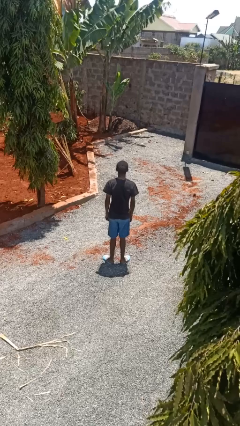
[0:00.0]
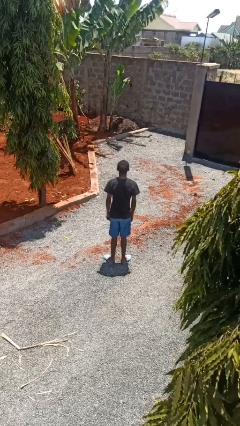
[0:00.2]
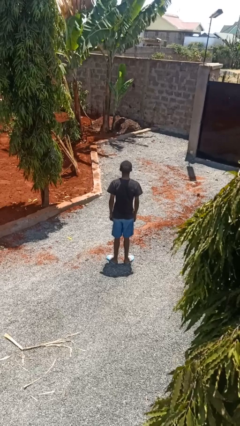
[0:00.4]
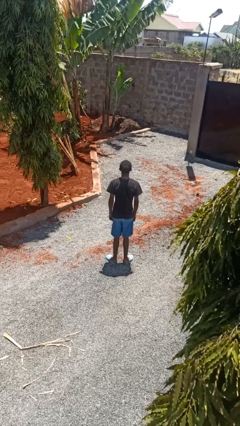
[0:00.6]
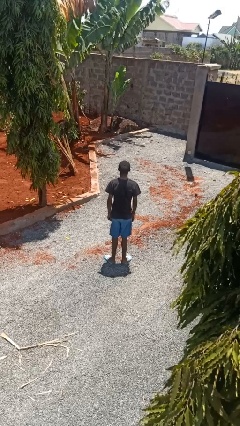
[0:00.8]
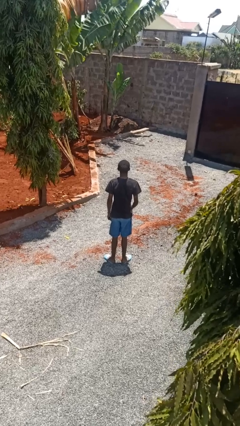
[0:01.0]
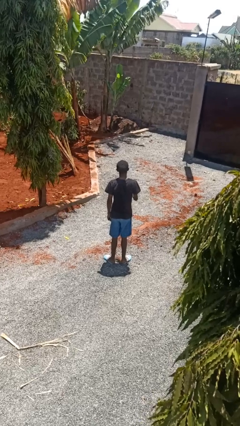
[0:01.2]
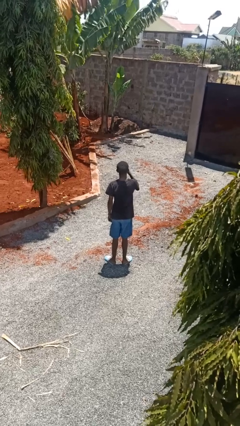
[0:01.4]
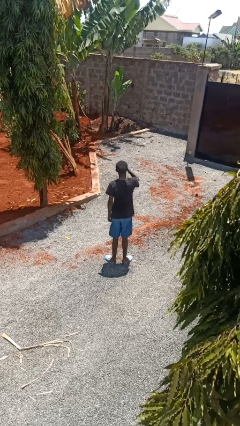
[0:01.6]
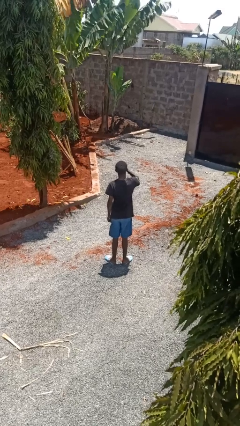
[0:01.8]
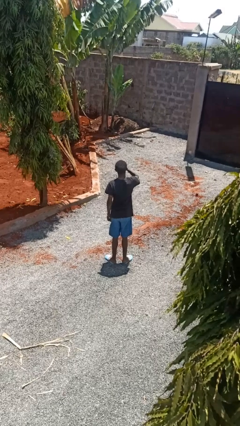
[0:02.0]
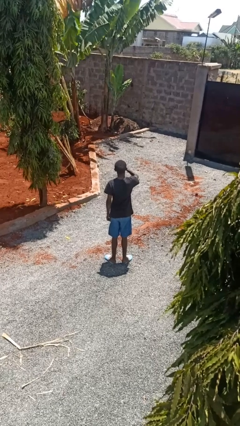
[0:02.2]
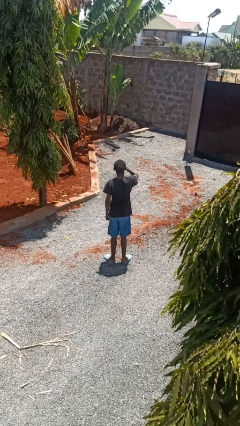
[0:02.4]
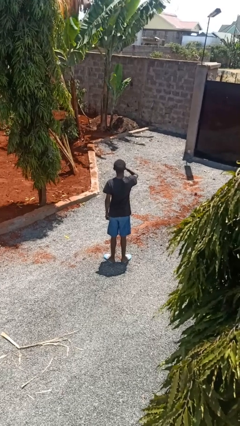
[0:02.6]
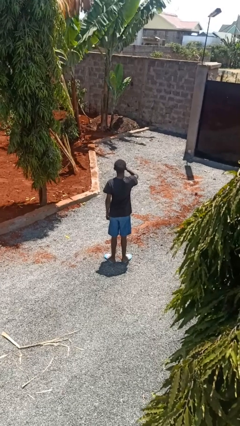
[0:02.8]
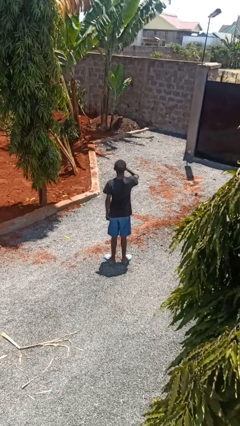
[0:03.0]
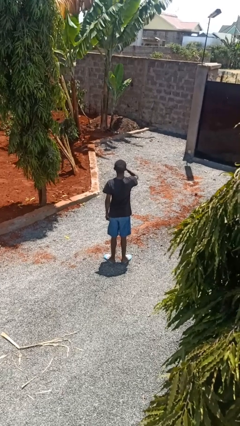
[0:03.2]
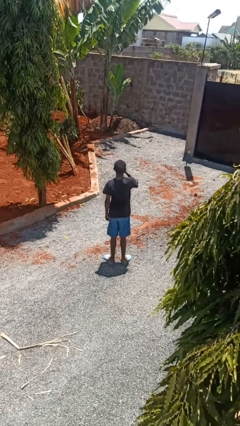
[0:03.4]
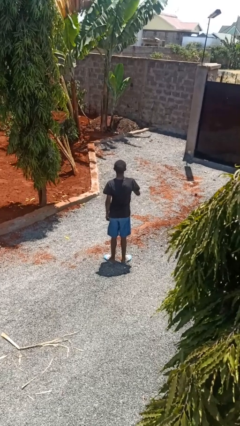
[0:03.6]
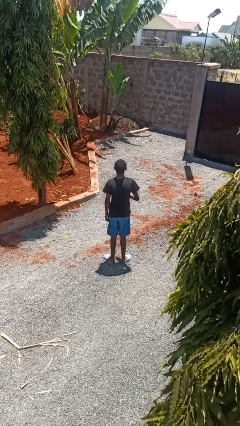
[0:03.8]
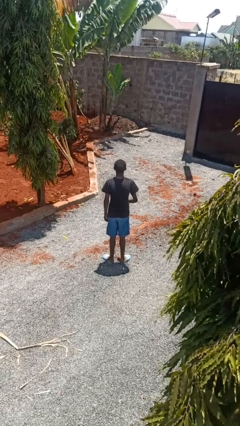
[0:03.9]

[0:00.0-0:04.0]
person rubs eyes

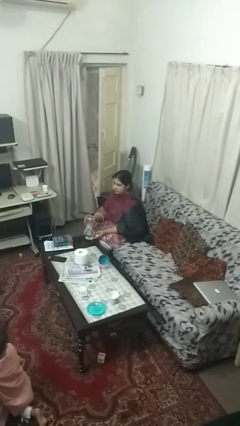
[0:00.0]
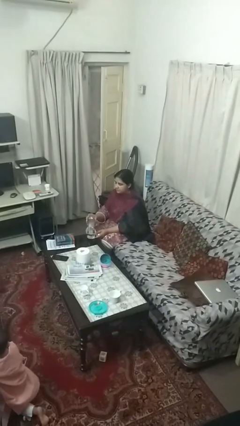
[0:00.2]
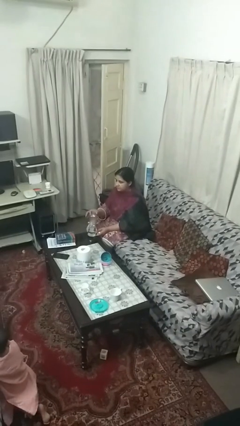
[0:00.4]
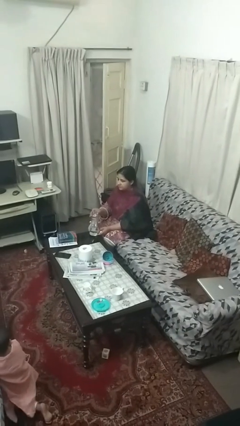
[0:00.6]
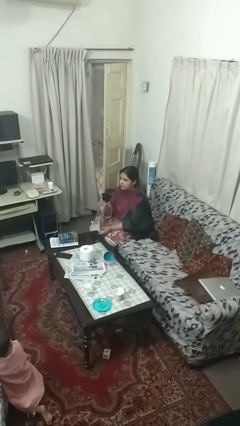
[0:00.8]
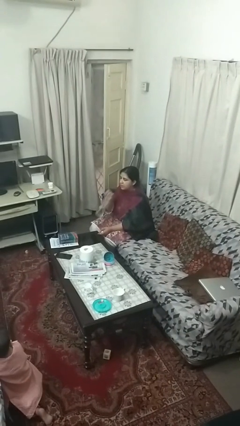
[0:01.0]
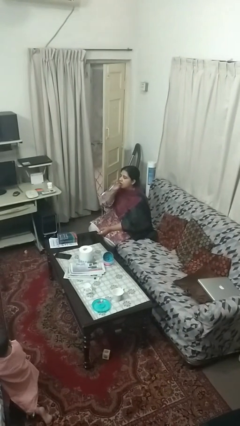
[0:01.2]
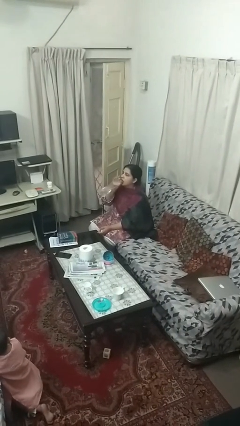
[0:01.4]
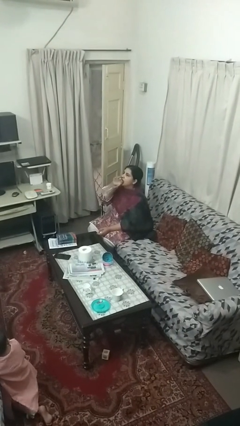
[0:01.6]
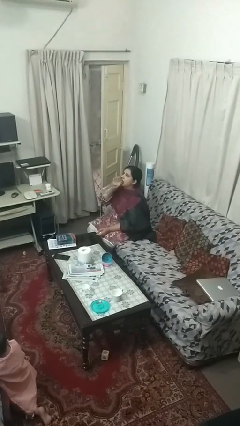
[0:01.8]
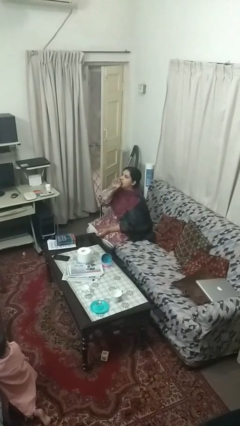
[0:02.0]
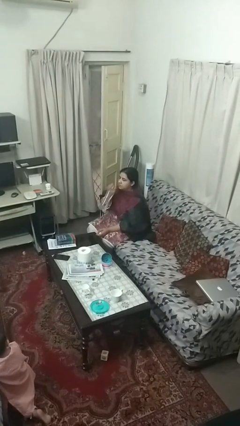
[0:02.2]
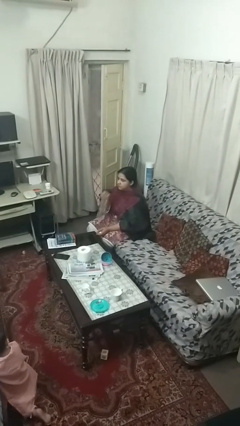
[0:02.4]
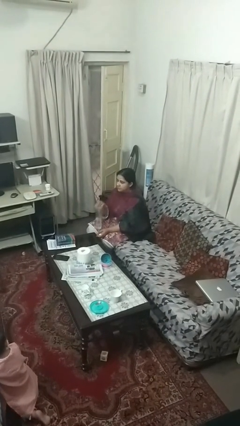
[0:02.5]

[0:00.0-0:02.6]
person drinks from bottle

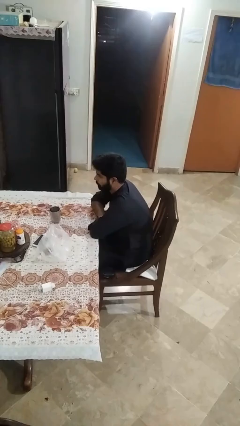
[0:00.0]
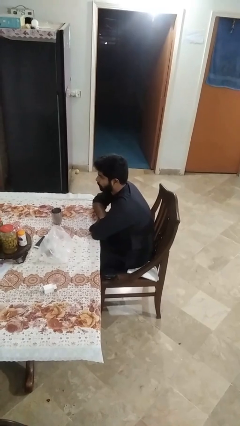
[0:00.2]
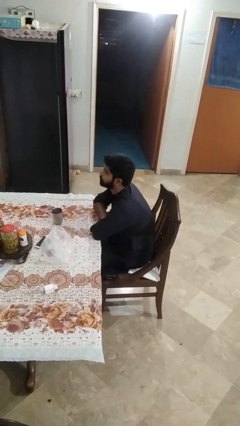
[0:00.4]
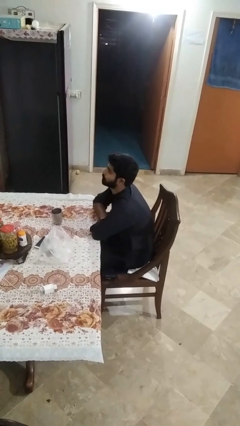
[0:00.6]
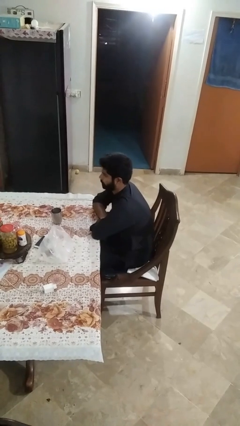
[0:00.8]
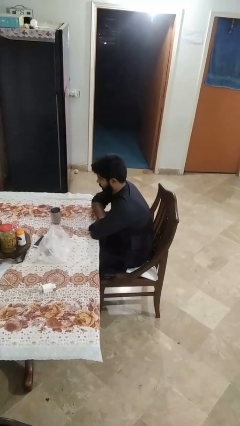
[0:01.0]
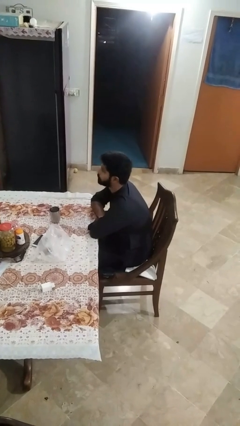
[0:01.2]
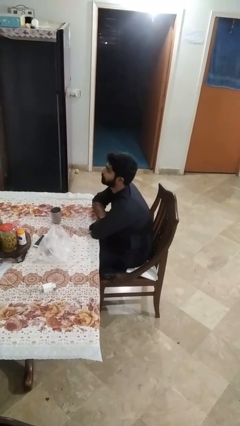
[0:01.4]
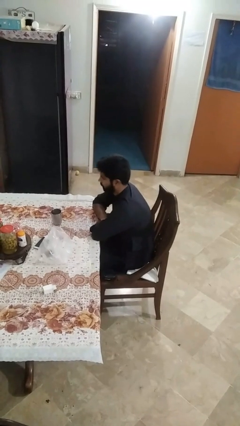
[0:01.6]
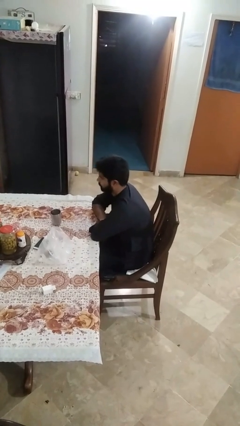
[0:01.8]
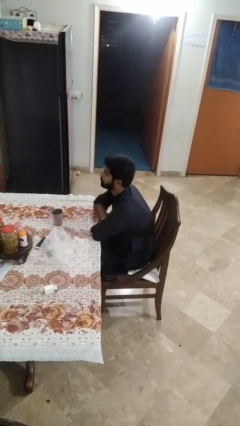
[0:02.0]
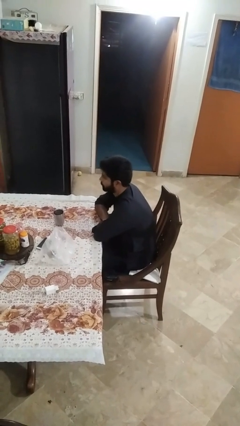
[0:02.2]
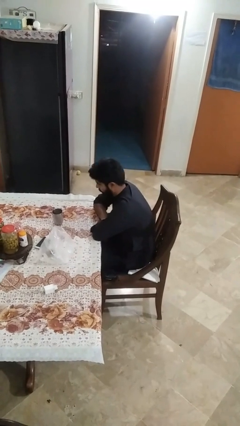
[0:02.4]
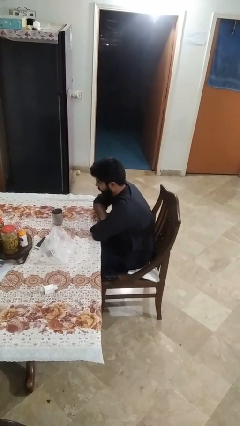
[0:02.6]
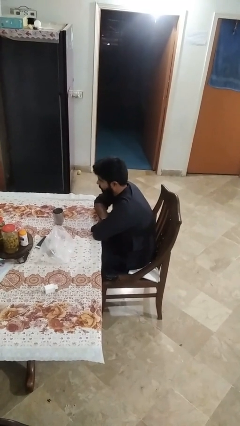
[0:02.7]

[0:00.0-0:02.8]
person nods head

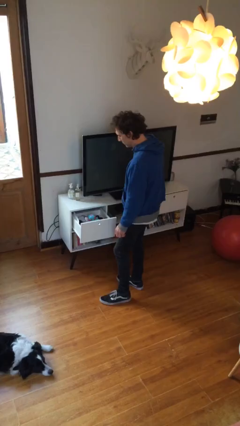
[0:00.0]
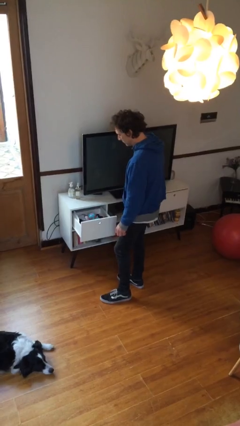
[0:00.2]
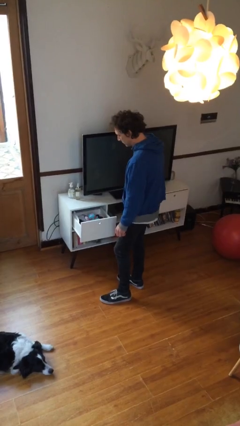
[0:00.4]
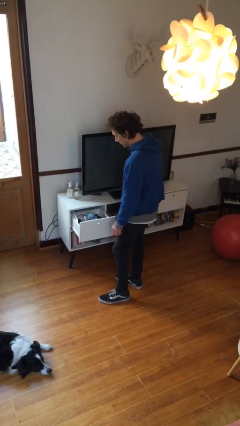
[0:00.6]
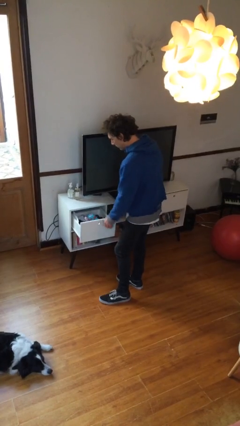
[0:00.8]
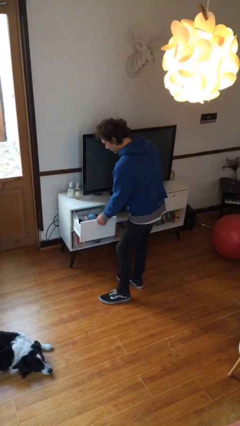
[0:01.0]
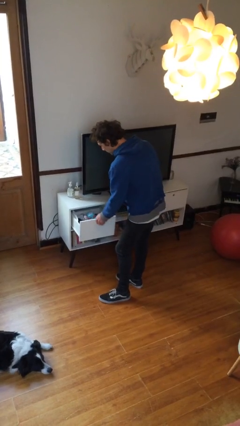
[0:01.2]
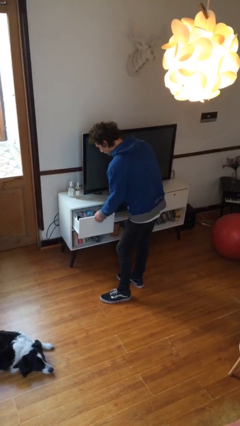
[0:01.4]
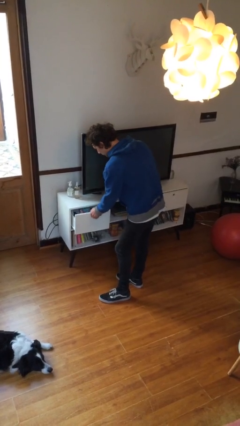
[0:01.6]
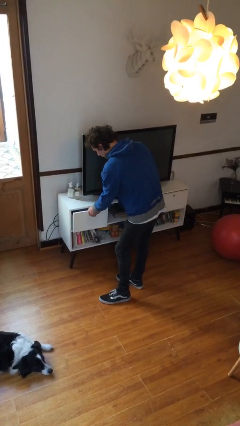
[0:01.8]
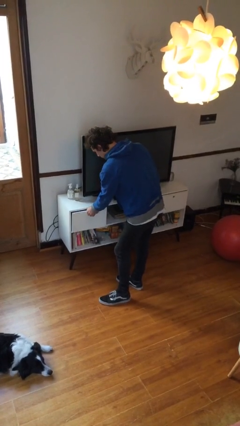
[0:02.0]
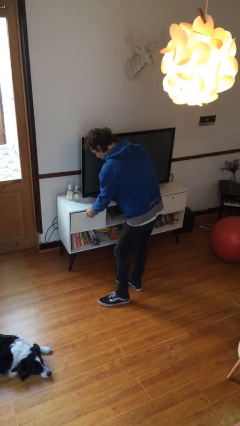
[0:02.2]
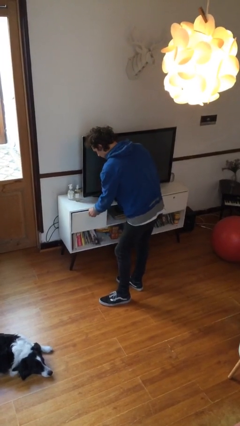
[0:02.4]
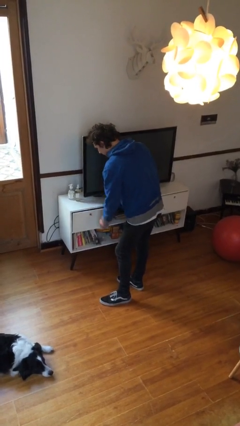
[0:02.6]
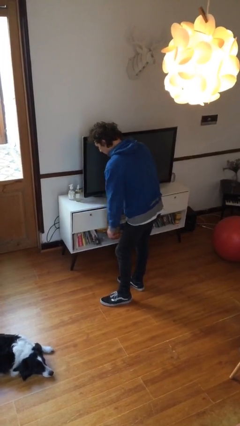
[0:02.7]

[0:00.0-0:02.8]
person closes dresser drawer

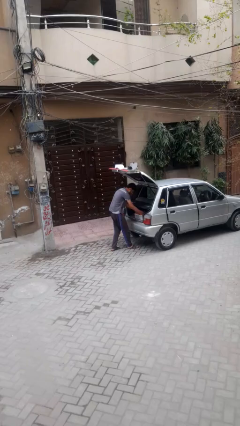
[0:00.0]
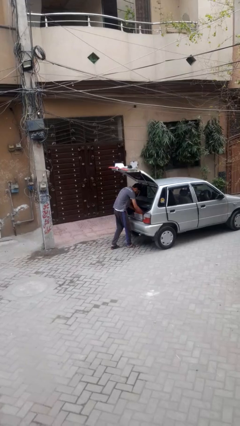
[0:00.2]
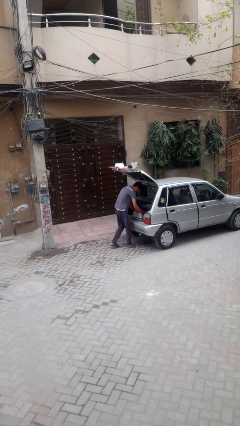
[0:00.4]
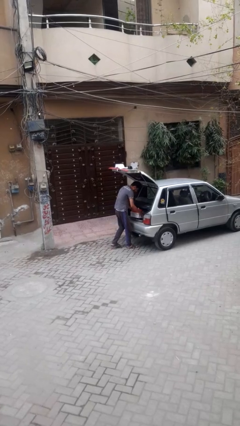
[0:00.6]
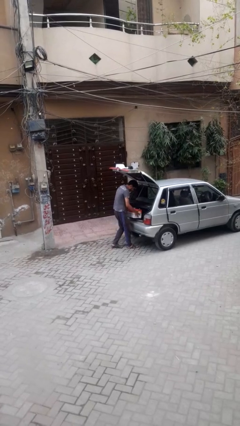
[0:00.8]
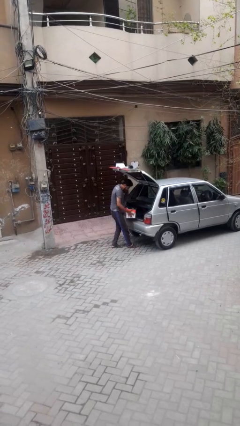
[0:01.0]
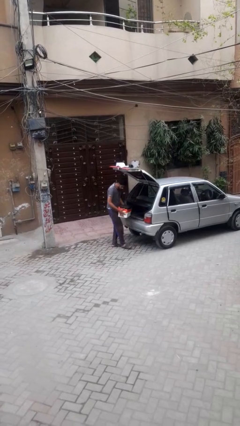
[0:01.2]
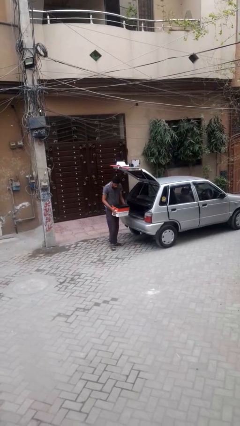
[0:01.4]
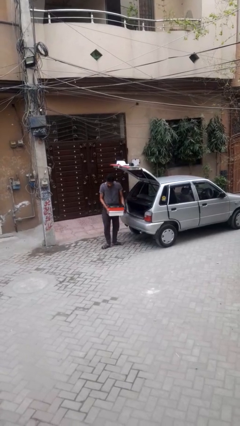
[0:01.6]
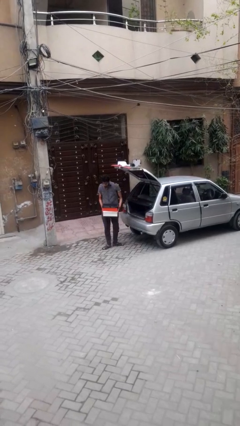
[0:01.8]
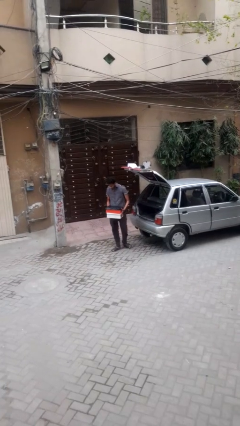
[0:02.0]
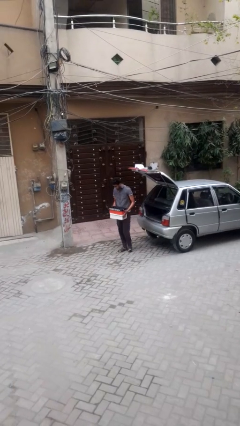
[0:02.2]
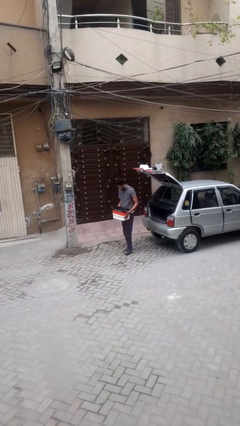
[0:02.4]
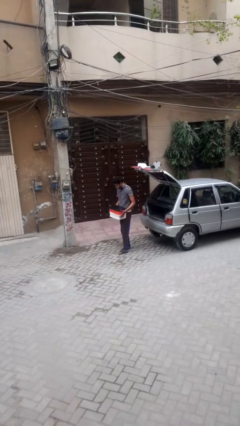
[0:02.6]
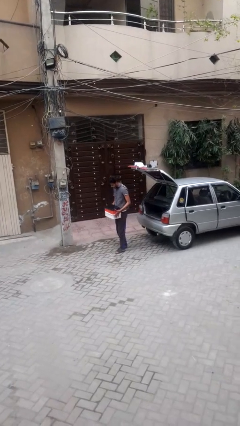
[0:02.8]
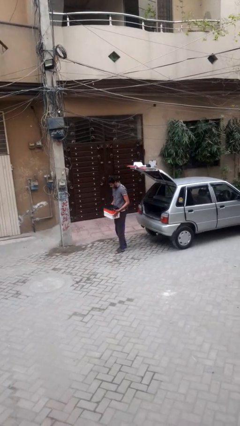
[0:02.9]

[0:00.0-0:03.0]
person unloads car

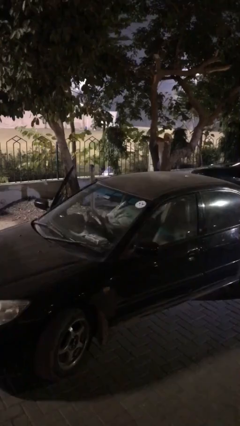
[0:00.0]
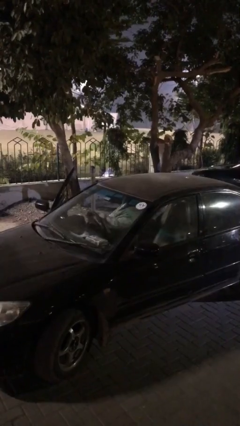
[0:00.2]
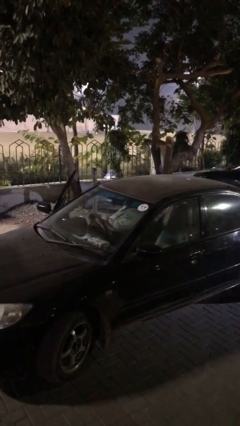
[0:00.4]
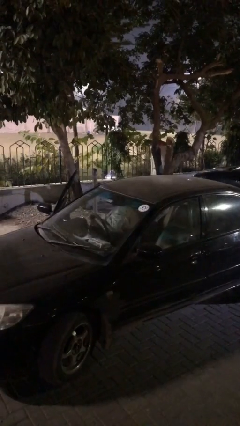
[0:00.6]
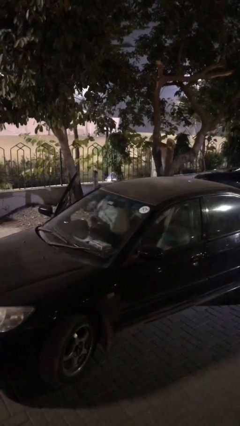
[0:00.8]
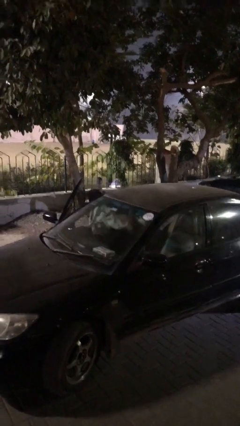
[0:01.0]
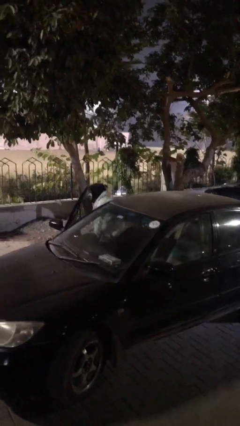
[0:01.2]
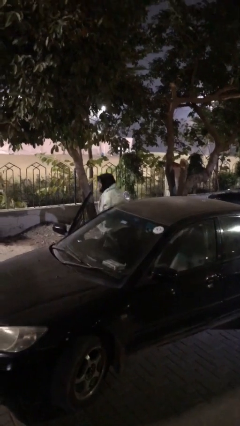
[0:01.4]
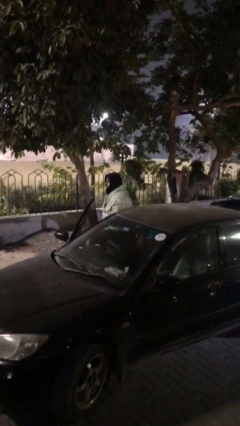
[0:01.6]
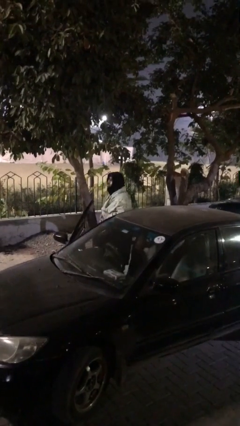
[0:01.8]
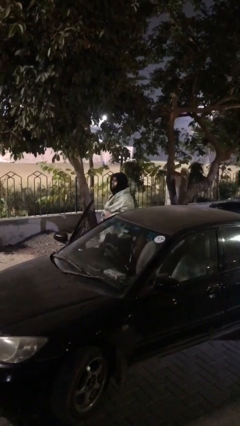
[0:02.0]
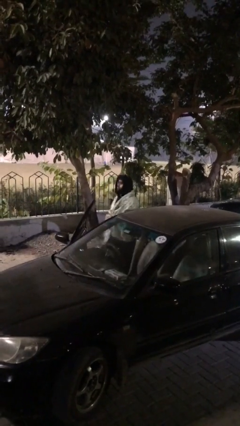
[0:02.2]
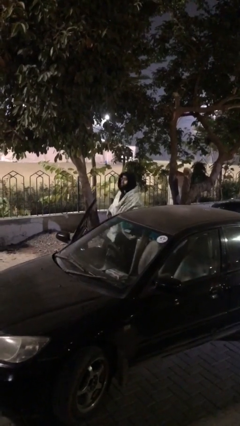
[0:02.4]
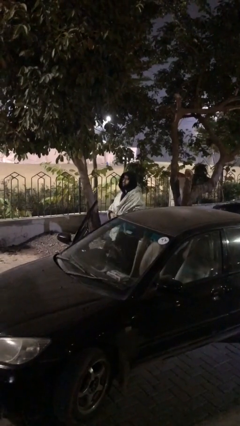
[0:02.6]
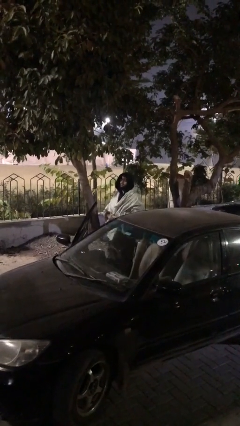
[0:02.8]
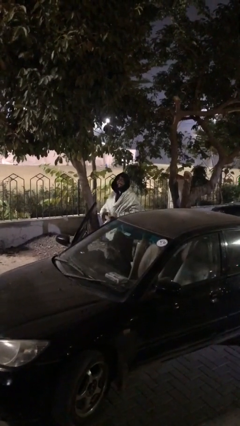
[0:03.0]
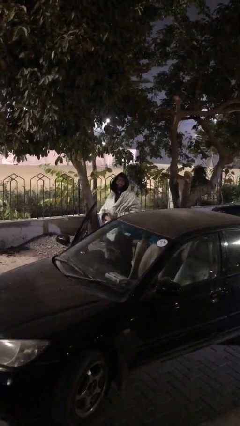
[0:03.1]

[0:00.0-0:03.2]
person exits car
